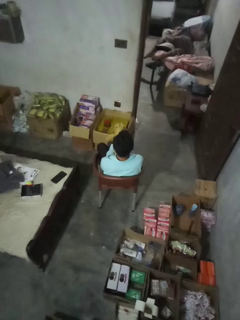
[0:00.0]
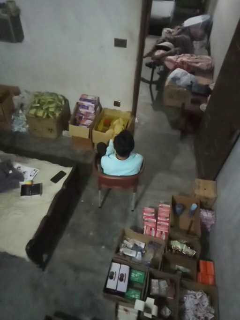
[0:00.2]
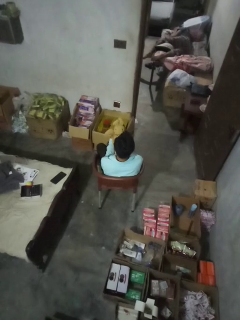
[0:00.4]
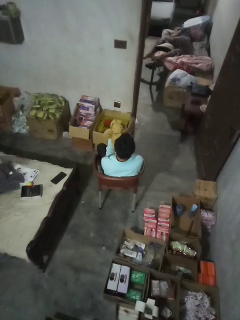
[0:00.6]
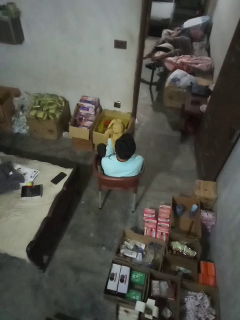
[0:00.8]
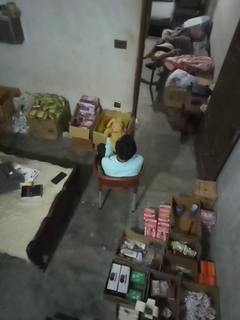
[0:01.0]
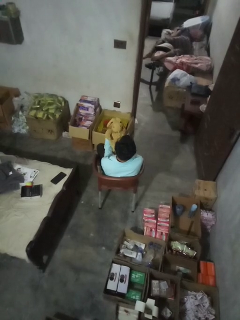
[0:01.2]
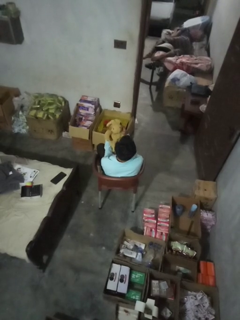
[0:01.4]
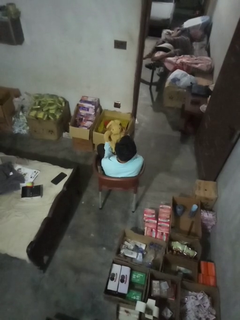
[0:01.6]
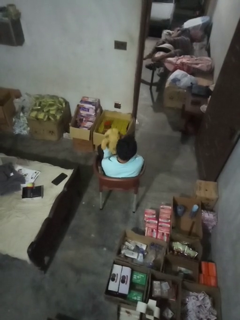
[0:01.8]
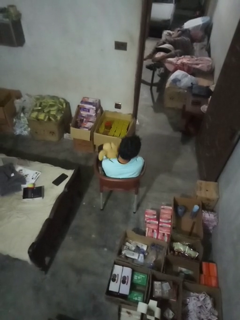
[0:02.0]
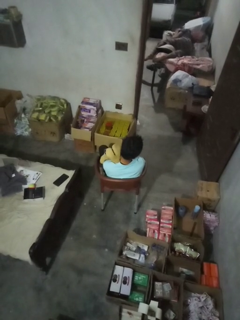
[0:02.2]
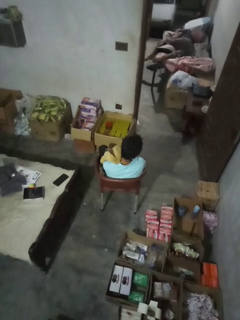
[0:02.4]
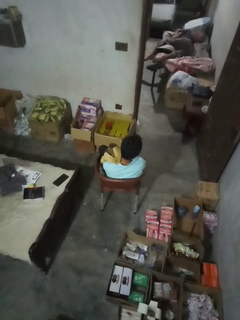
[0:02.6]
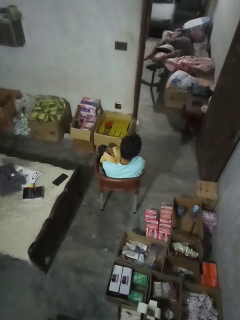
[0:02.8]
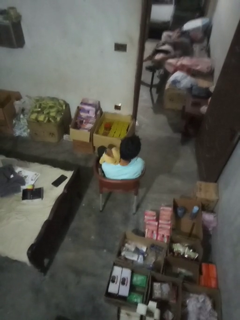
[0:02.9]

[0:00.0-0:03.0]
person hugs stuffed animal

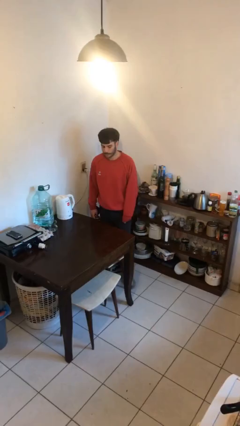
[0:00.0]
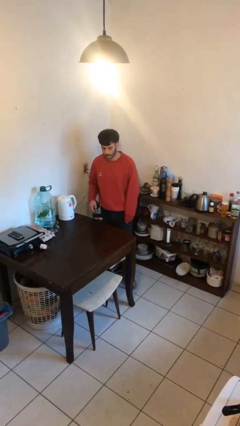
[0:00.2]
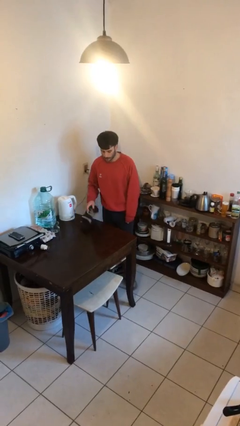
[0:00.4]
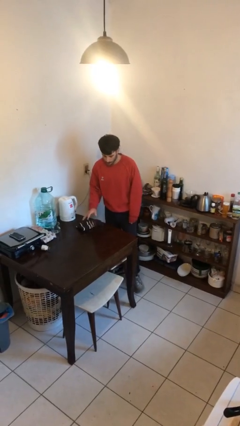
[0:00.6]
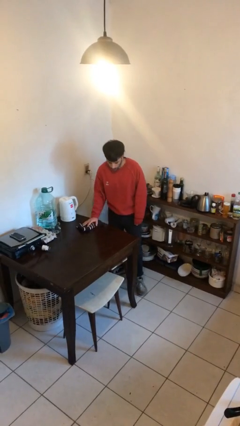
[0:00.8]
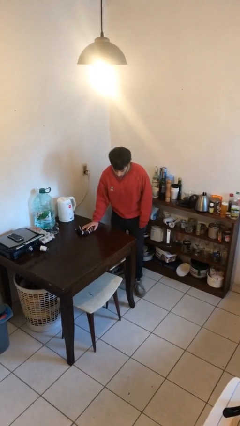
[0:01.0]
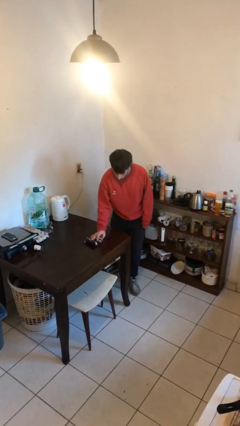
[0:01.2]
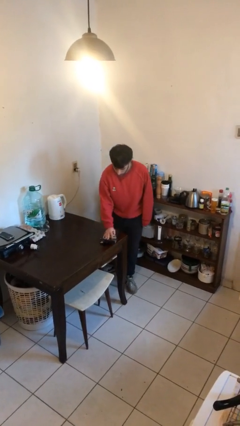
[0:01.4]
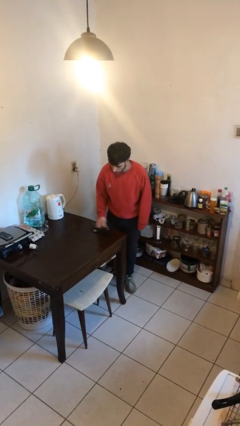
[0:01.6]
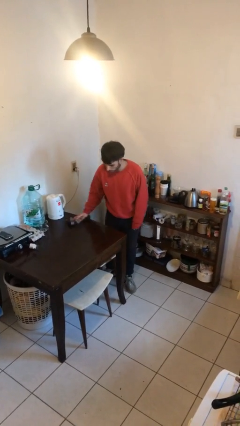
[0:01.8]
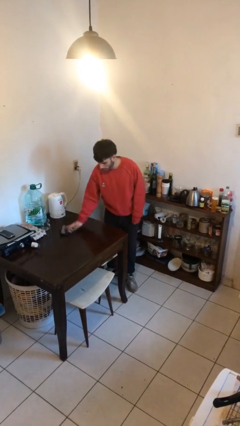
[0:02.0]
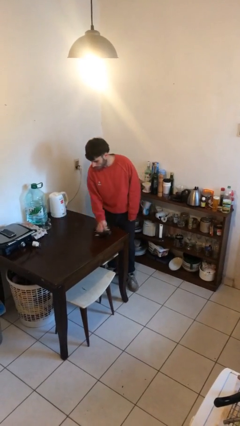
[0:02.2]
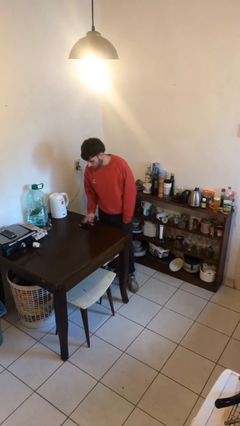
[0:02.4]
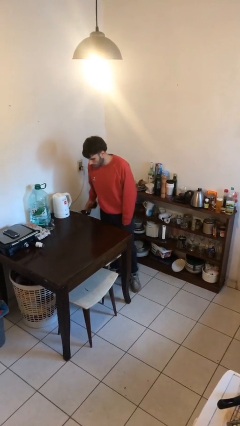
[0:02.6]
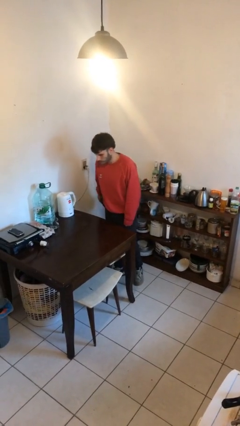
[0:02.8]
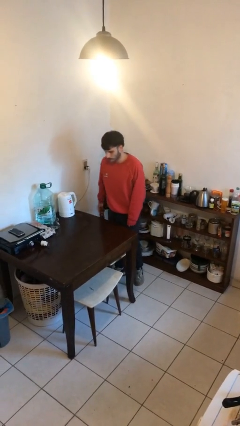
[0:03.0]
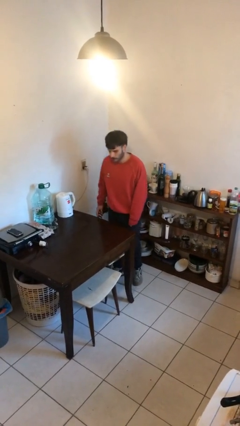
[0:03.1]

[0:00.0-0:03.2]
person cleans table with rag

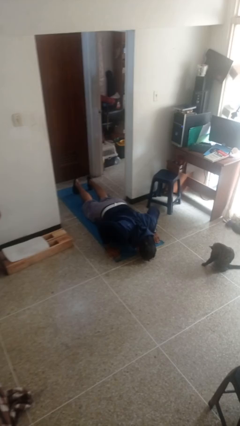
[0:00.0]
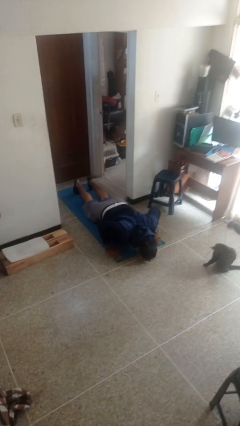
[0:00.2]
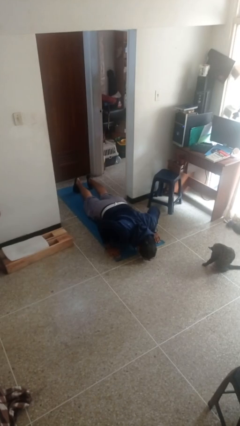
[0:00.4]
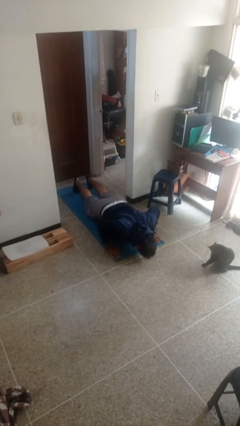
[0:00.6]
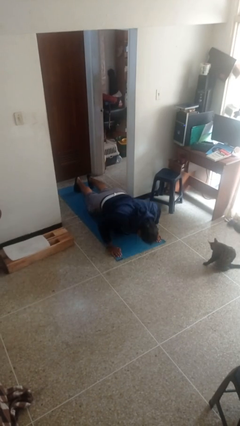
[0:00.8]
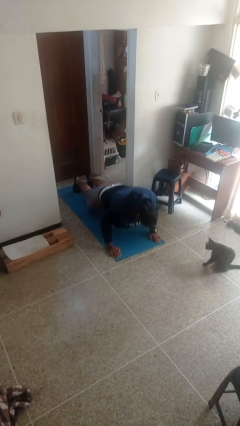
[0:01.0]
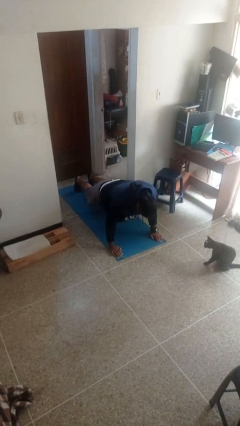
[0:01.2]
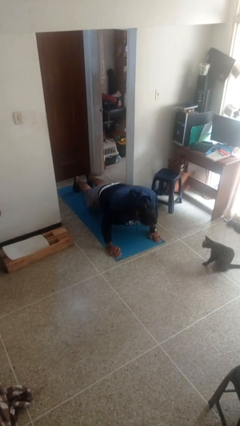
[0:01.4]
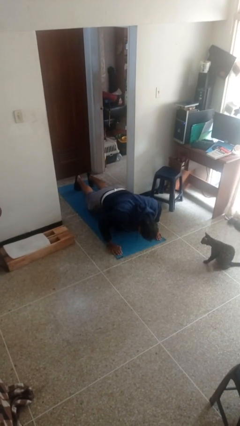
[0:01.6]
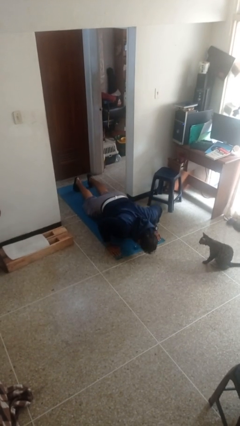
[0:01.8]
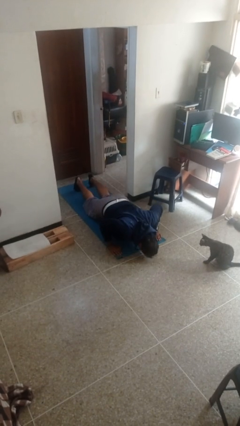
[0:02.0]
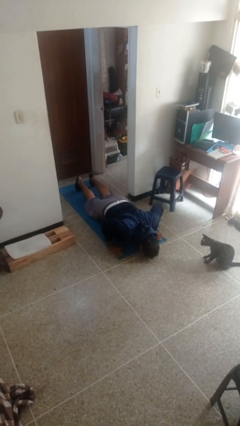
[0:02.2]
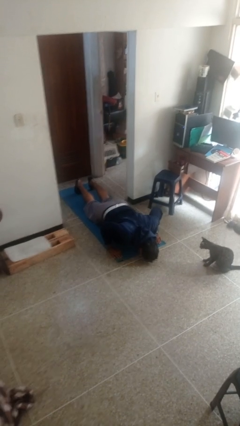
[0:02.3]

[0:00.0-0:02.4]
person exercises with pushup

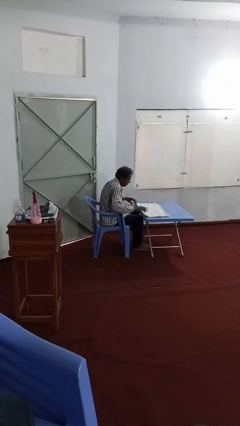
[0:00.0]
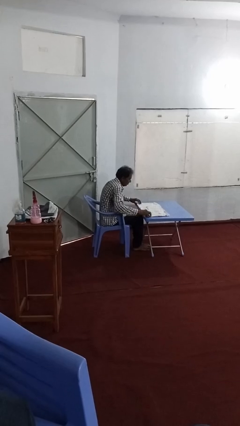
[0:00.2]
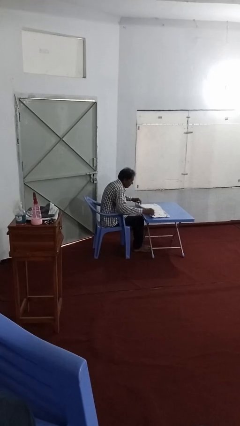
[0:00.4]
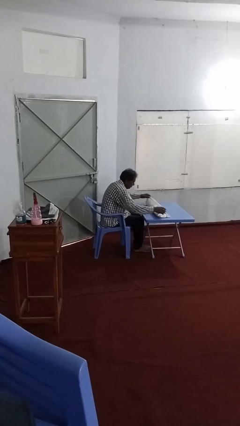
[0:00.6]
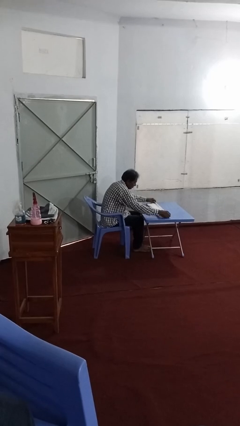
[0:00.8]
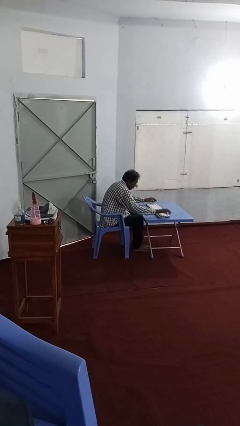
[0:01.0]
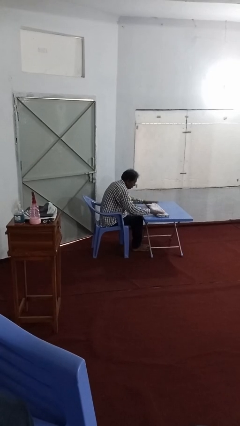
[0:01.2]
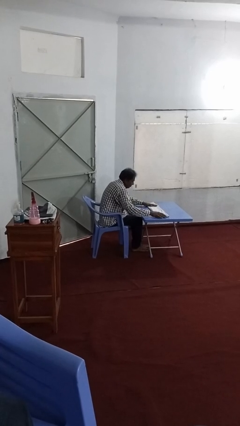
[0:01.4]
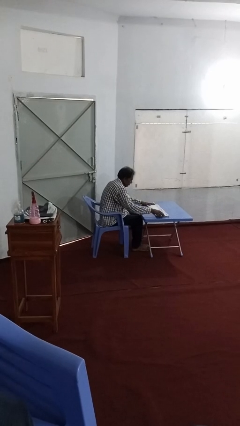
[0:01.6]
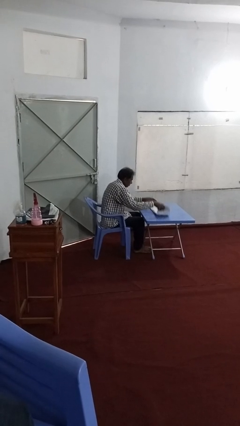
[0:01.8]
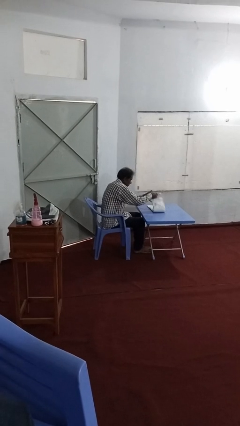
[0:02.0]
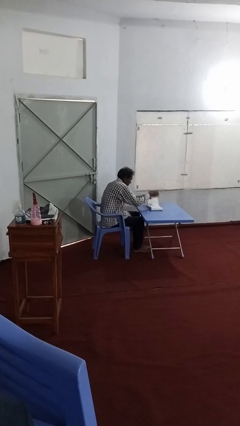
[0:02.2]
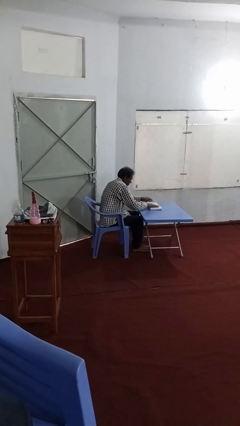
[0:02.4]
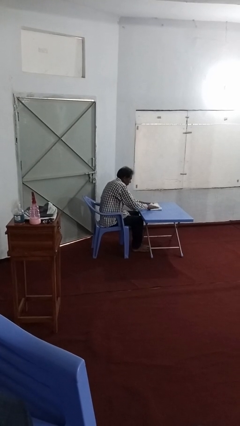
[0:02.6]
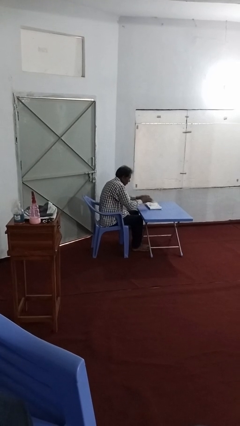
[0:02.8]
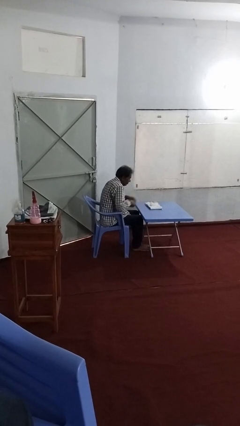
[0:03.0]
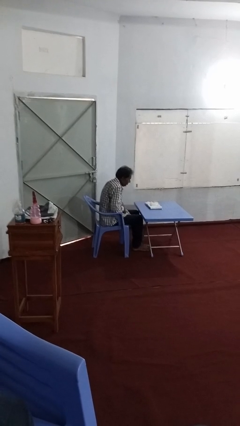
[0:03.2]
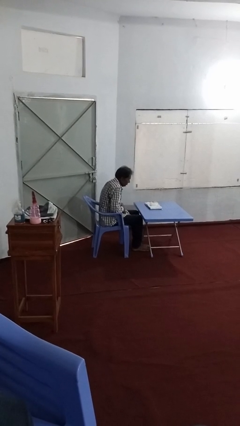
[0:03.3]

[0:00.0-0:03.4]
person folds towel

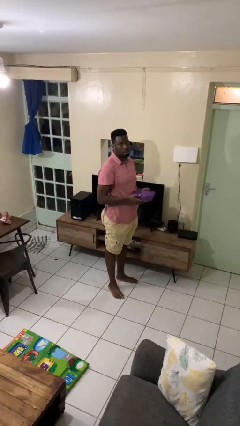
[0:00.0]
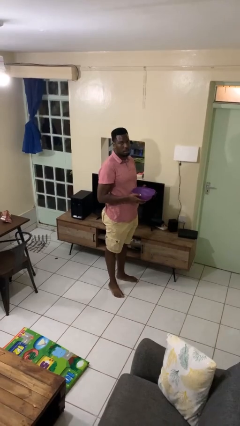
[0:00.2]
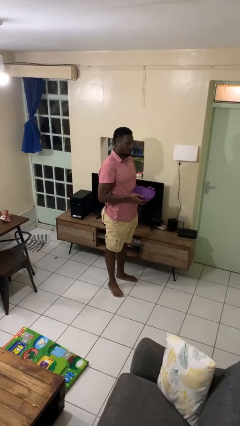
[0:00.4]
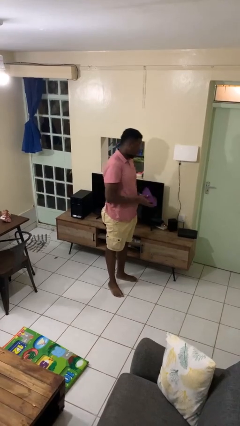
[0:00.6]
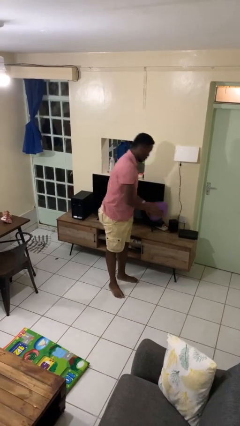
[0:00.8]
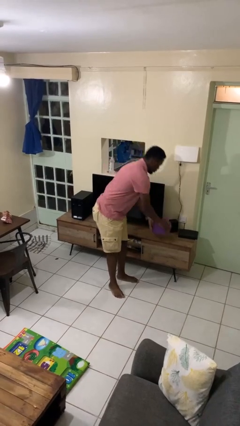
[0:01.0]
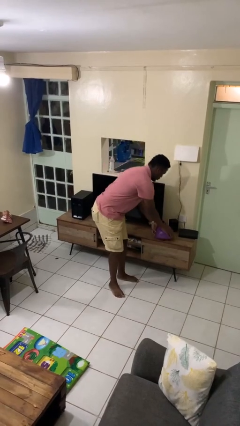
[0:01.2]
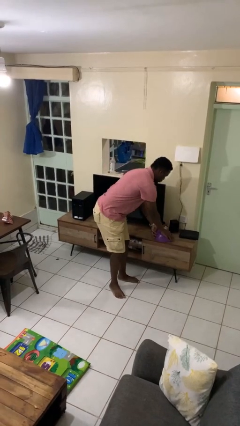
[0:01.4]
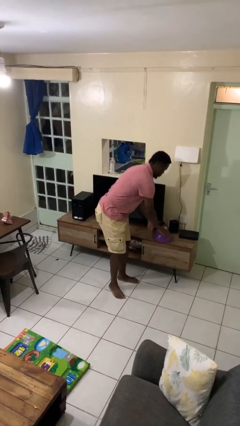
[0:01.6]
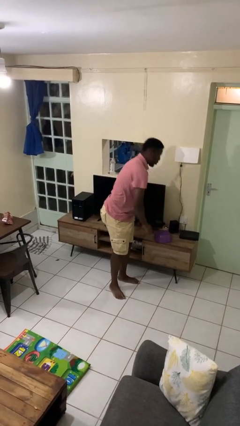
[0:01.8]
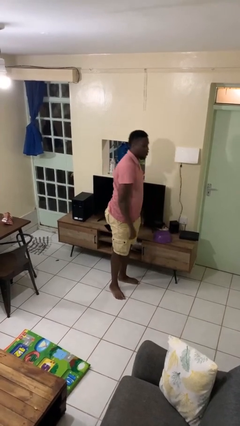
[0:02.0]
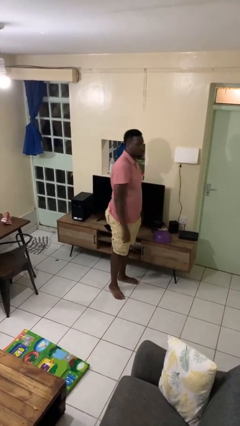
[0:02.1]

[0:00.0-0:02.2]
person puts down object on countertop

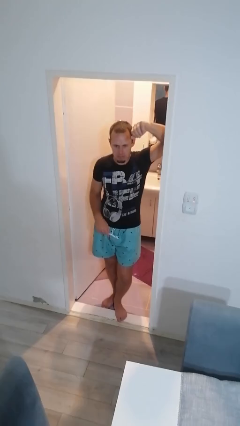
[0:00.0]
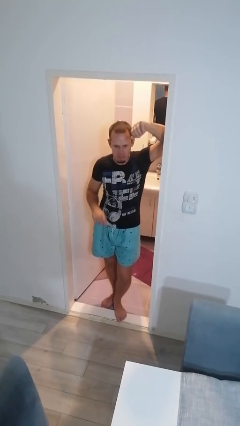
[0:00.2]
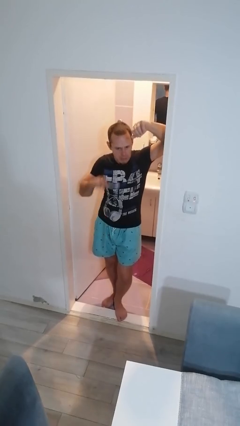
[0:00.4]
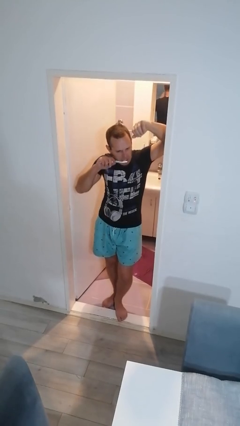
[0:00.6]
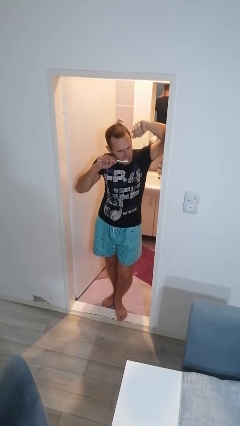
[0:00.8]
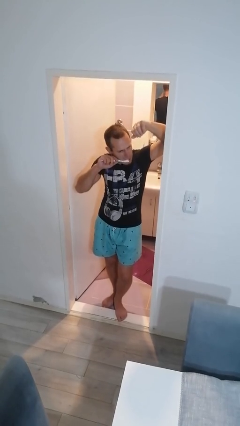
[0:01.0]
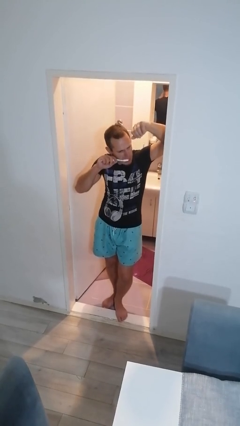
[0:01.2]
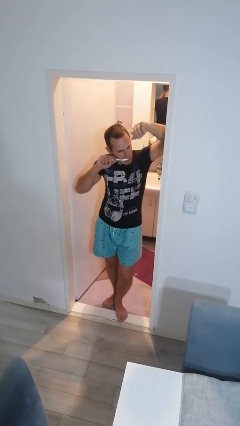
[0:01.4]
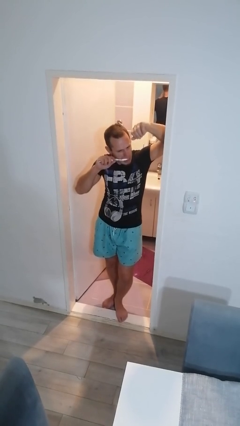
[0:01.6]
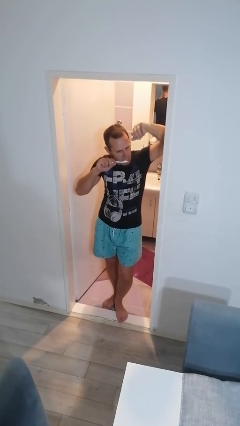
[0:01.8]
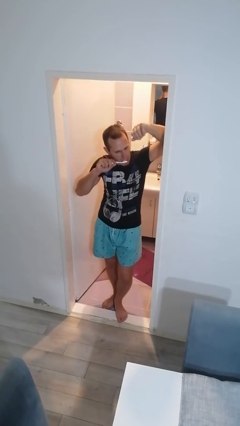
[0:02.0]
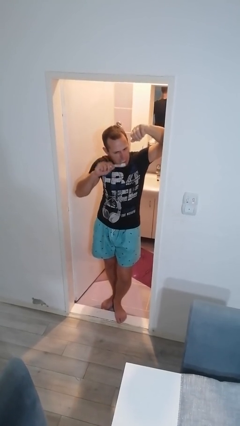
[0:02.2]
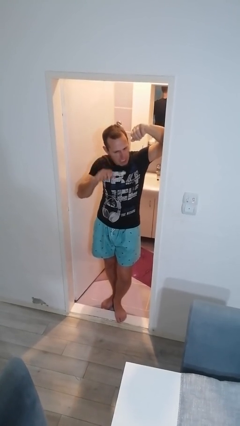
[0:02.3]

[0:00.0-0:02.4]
person brushes teeth

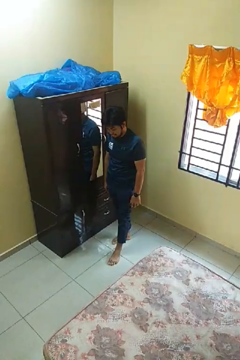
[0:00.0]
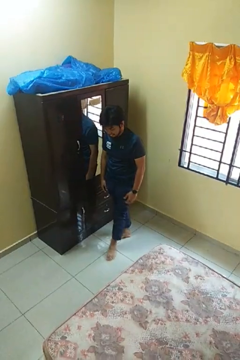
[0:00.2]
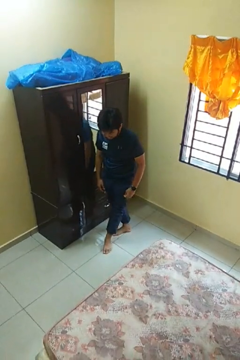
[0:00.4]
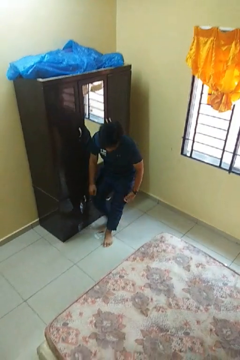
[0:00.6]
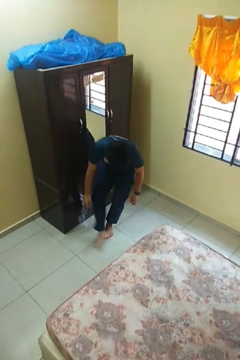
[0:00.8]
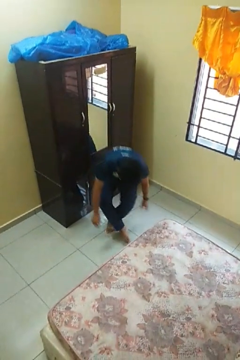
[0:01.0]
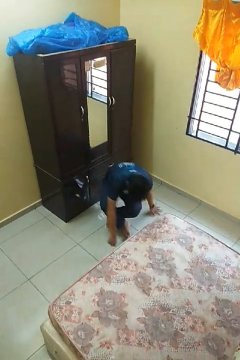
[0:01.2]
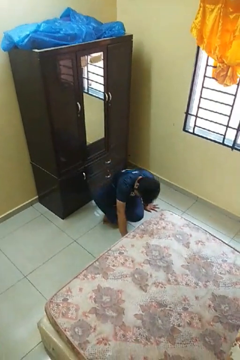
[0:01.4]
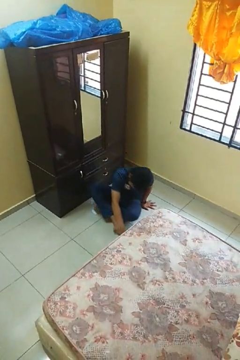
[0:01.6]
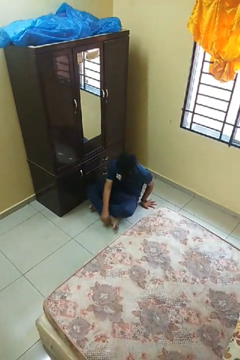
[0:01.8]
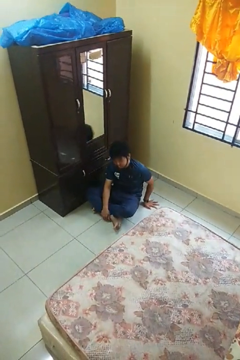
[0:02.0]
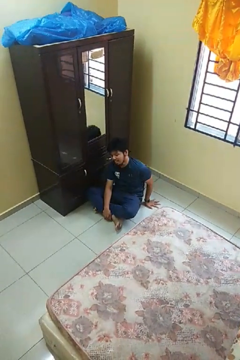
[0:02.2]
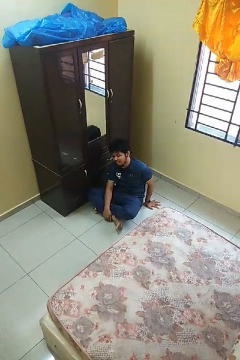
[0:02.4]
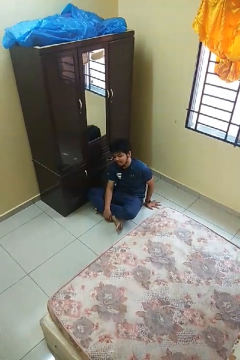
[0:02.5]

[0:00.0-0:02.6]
person sits crisscross
